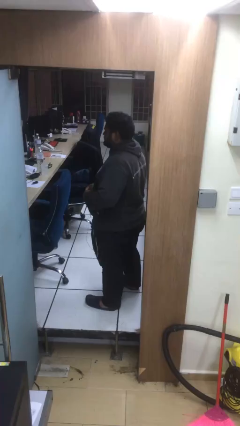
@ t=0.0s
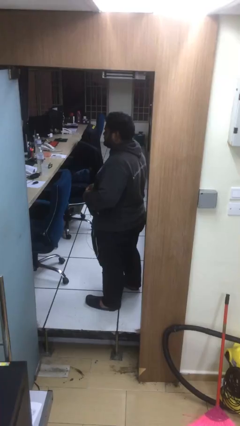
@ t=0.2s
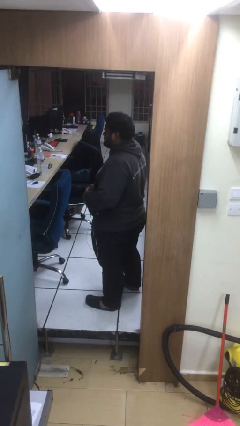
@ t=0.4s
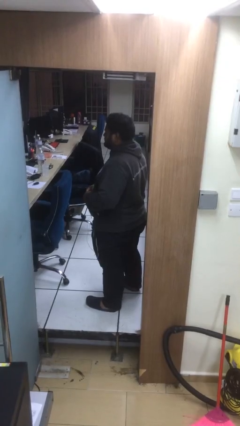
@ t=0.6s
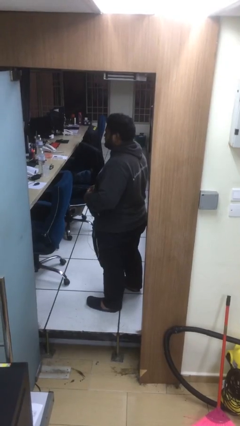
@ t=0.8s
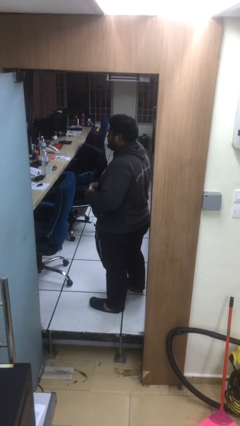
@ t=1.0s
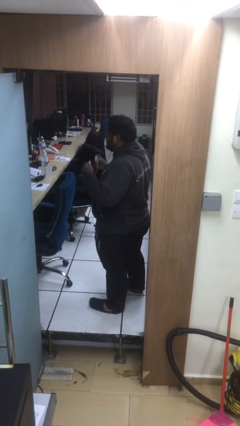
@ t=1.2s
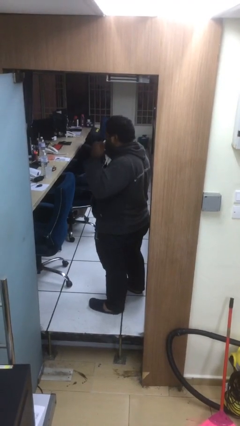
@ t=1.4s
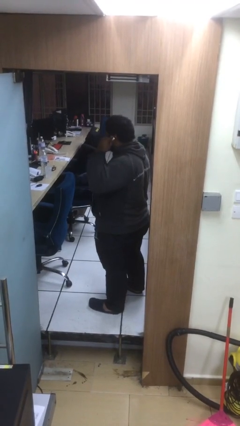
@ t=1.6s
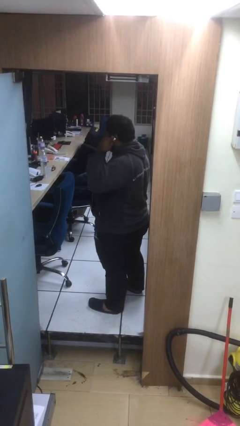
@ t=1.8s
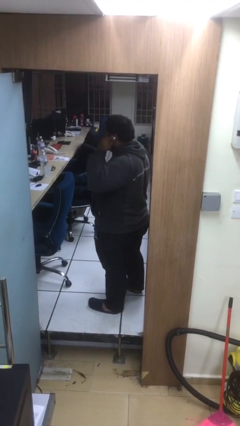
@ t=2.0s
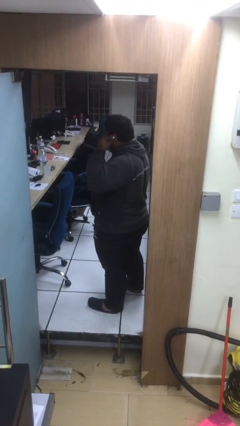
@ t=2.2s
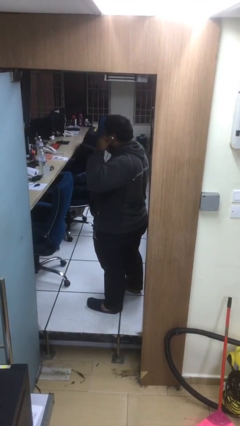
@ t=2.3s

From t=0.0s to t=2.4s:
person puts on headphones

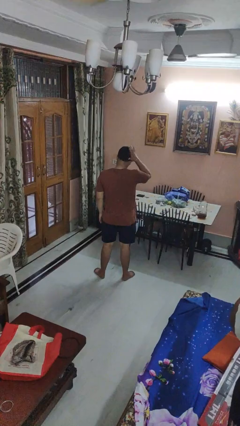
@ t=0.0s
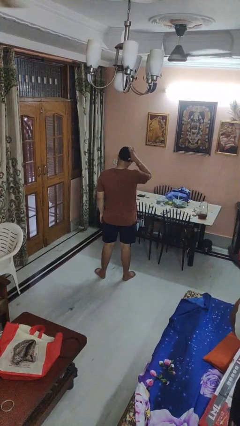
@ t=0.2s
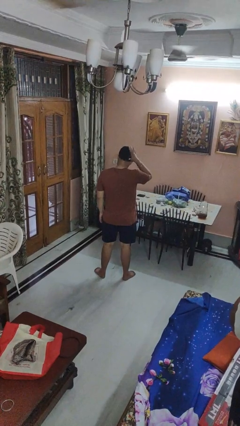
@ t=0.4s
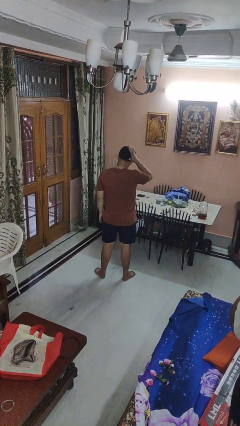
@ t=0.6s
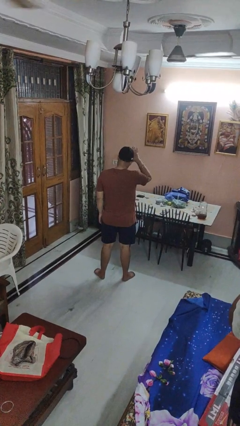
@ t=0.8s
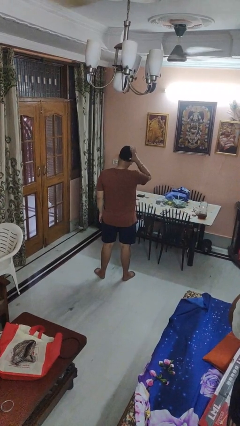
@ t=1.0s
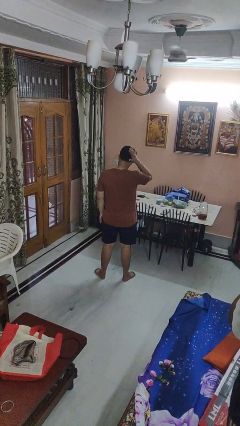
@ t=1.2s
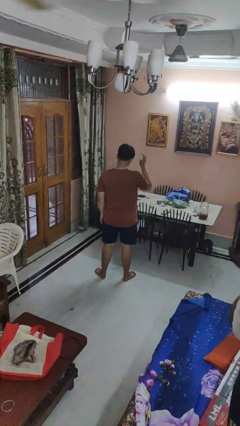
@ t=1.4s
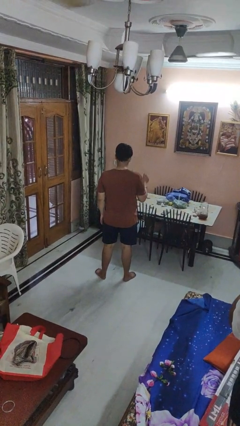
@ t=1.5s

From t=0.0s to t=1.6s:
person pats head

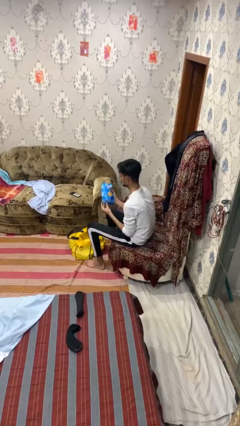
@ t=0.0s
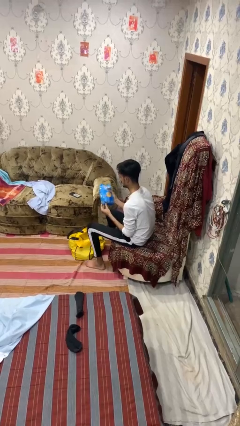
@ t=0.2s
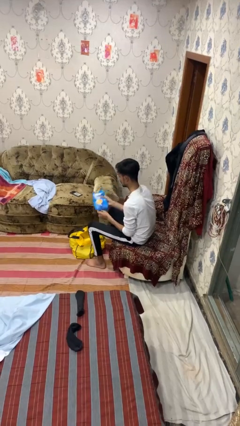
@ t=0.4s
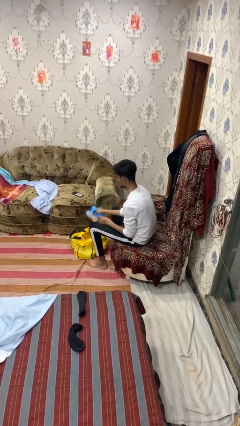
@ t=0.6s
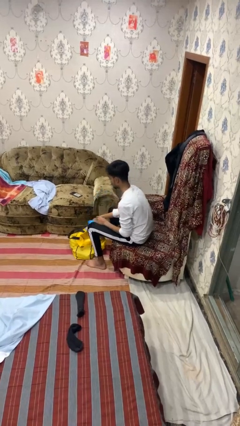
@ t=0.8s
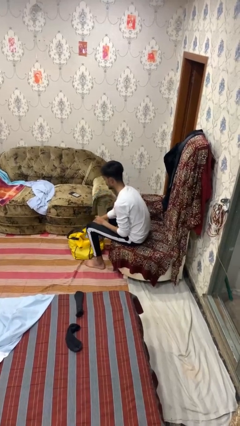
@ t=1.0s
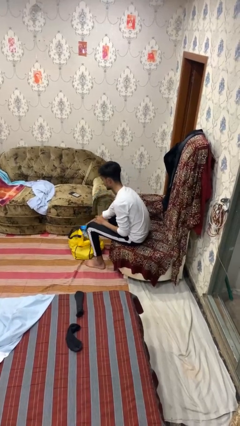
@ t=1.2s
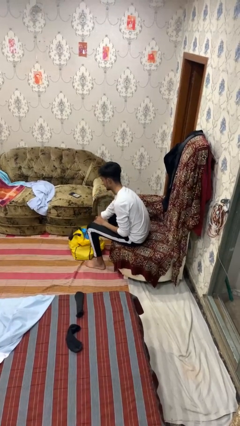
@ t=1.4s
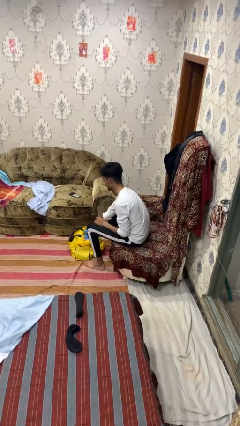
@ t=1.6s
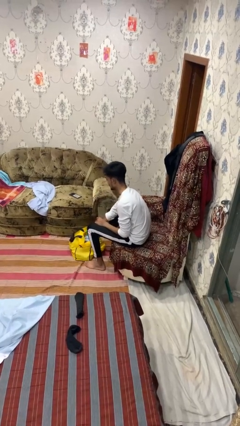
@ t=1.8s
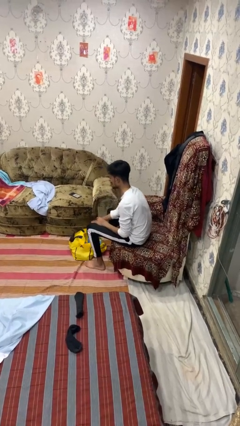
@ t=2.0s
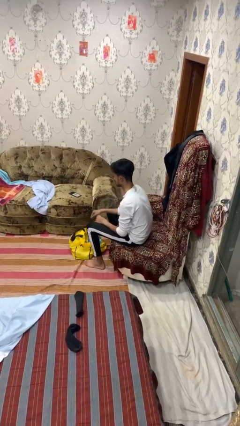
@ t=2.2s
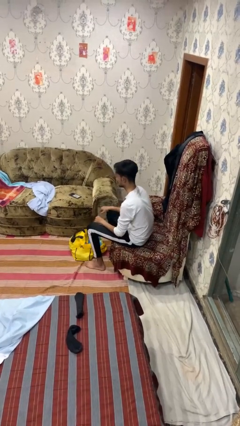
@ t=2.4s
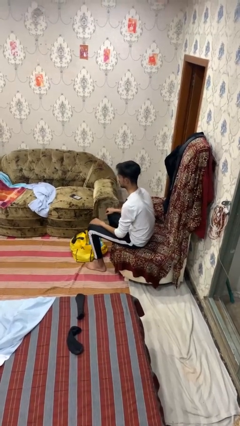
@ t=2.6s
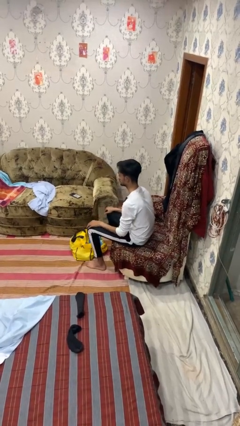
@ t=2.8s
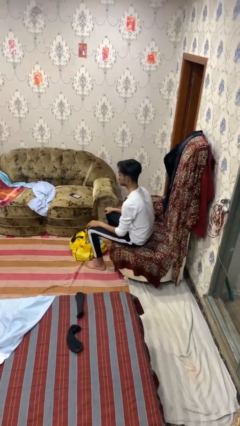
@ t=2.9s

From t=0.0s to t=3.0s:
person puts object into bag

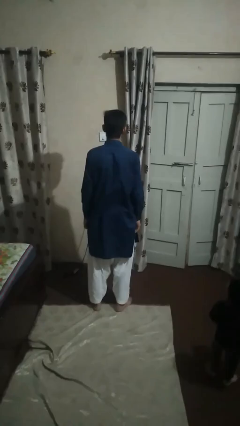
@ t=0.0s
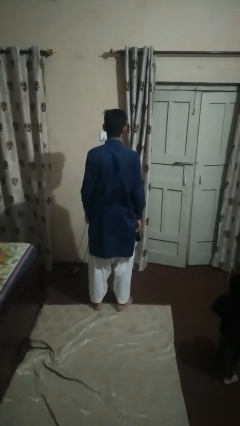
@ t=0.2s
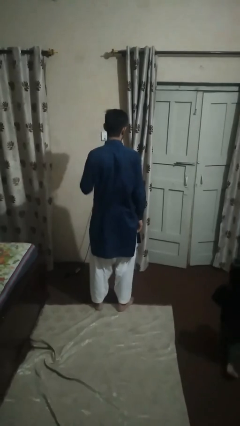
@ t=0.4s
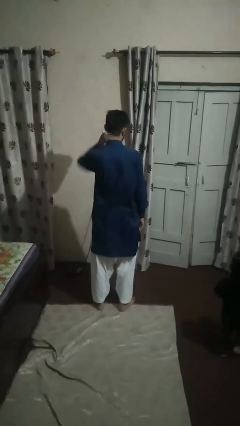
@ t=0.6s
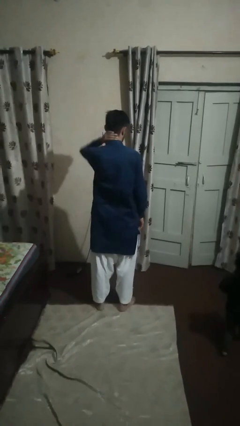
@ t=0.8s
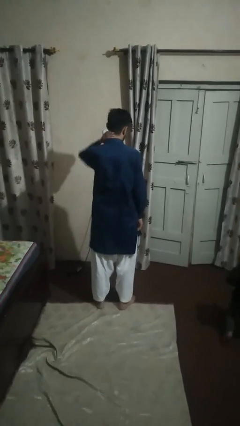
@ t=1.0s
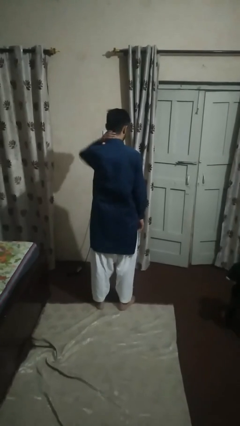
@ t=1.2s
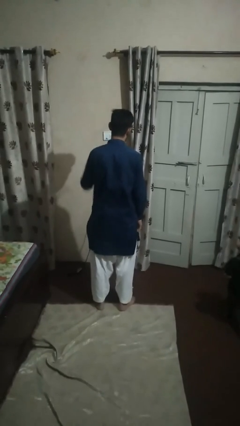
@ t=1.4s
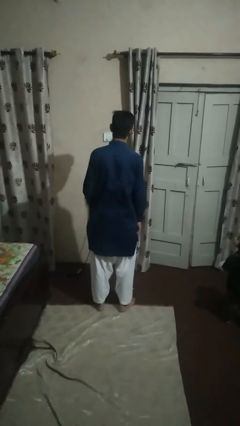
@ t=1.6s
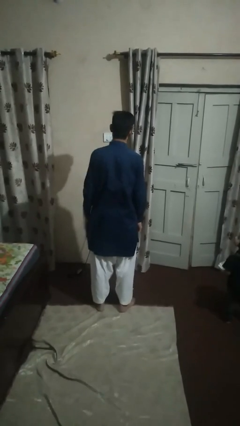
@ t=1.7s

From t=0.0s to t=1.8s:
person rubs neck

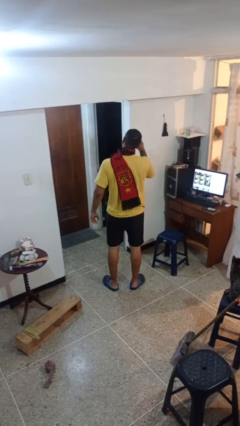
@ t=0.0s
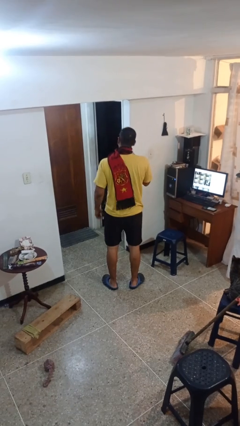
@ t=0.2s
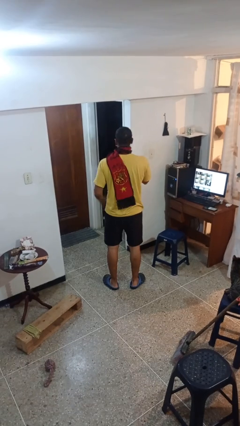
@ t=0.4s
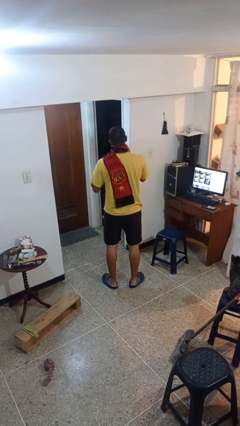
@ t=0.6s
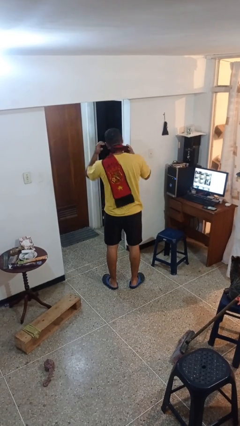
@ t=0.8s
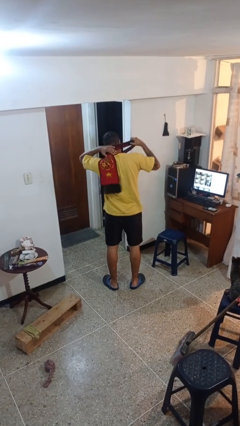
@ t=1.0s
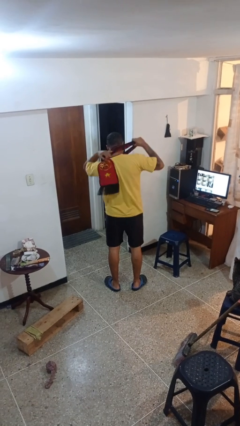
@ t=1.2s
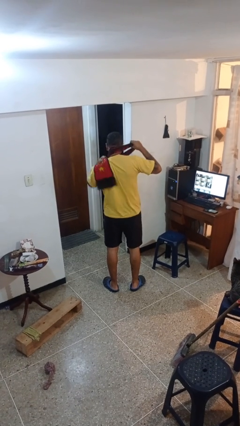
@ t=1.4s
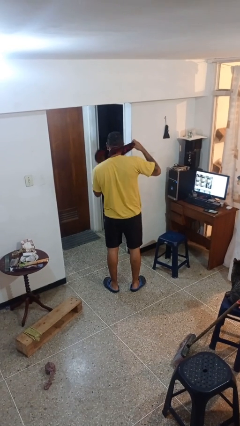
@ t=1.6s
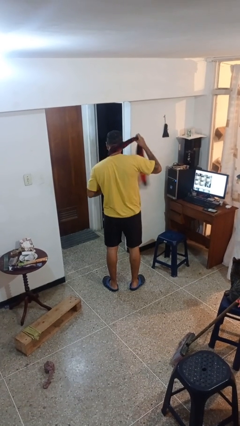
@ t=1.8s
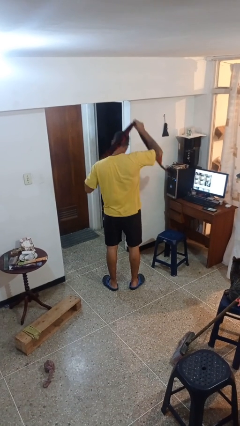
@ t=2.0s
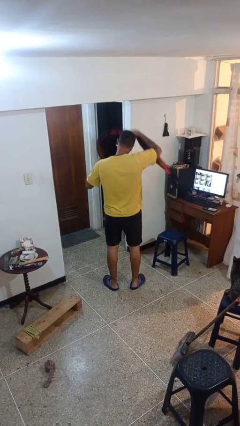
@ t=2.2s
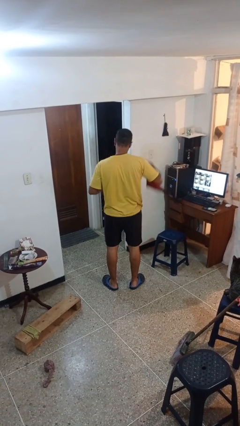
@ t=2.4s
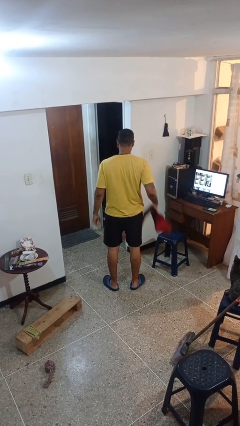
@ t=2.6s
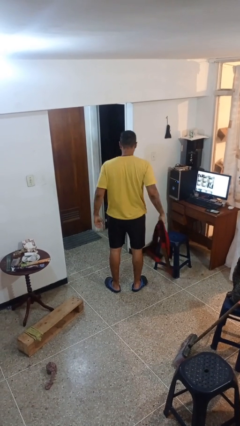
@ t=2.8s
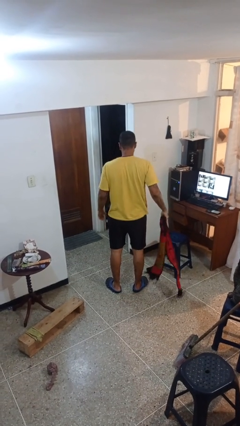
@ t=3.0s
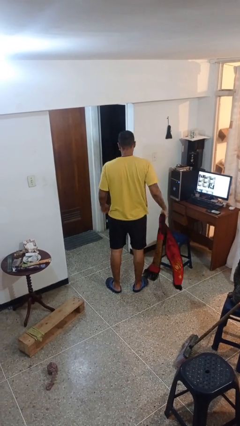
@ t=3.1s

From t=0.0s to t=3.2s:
person takes off scarf

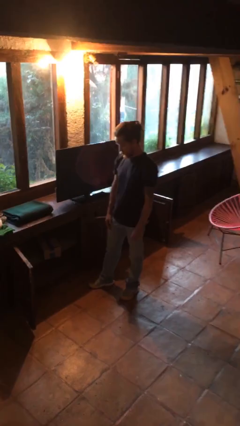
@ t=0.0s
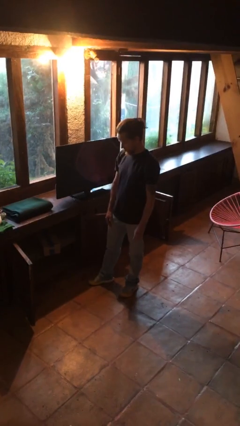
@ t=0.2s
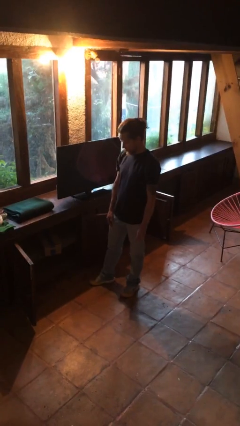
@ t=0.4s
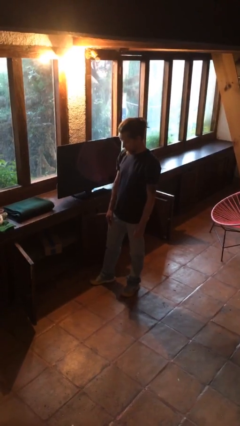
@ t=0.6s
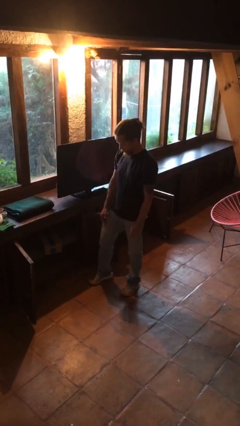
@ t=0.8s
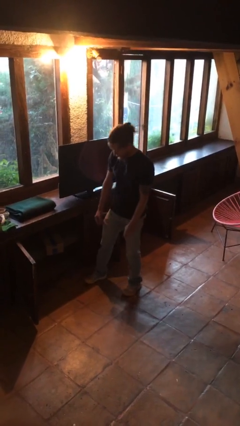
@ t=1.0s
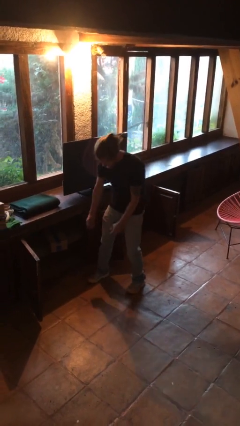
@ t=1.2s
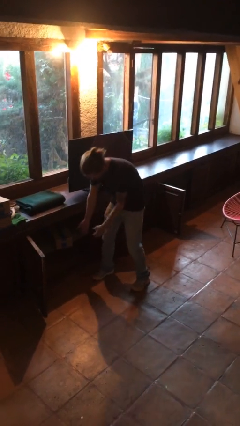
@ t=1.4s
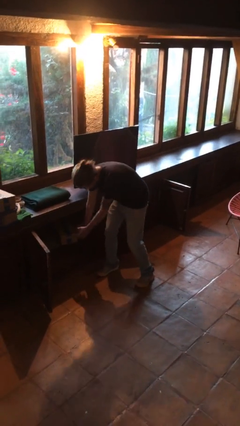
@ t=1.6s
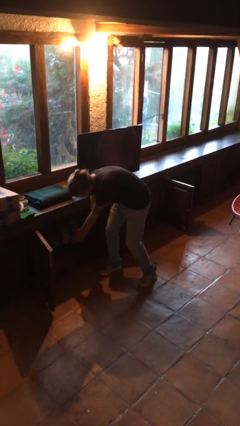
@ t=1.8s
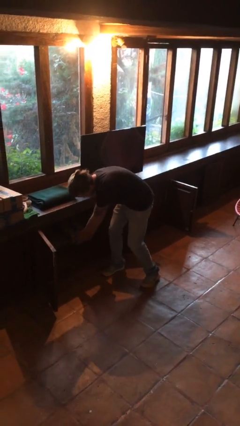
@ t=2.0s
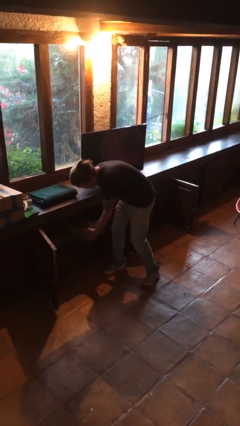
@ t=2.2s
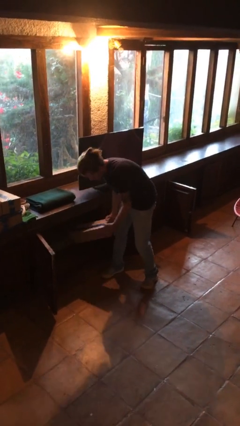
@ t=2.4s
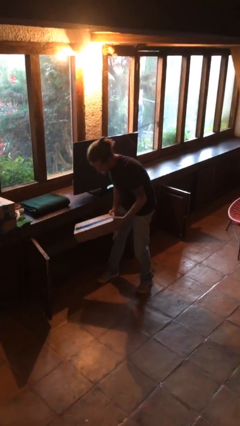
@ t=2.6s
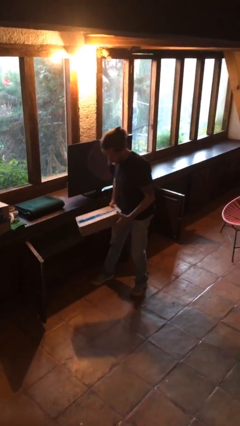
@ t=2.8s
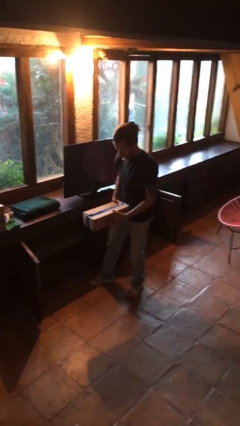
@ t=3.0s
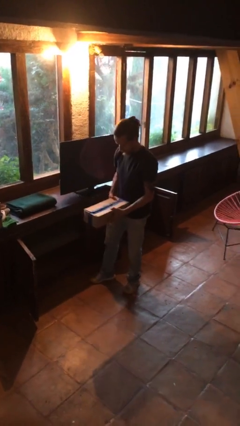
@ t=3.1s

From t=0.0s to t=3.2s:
person picks up object from cabinet

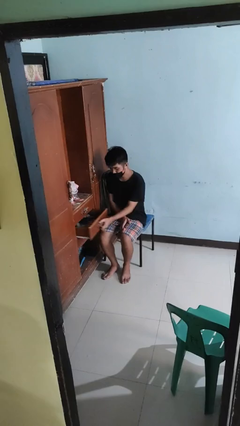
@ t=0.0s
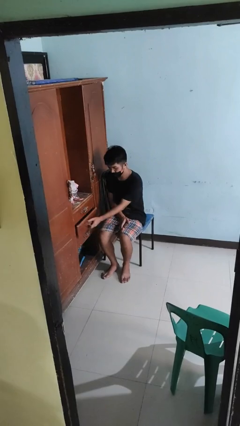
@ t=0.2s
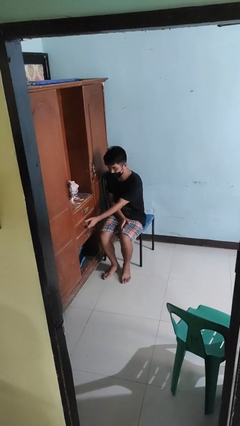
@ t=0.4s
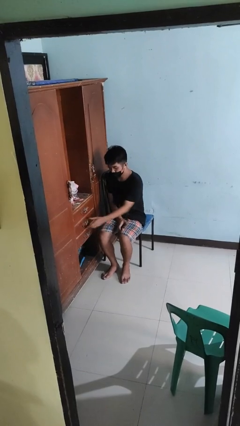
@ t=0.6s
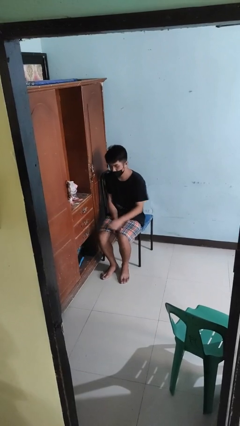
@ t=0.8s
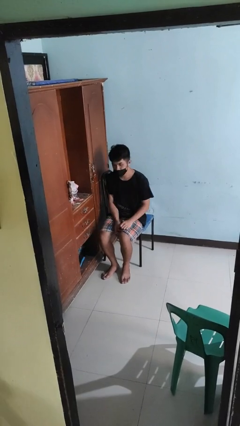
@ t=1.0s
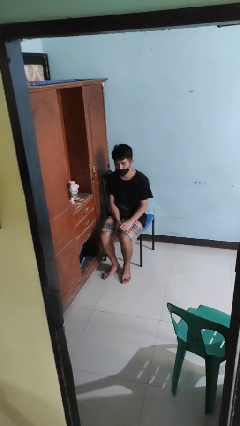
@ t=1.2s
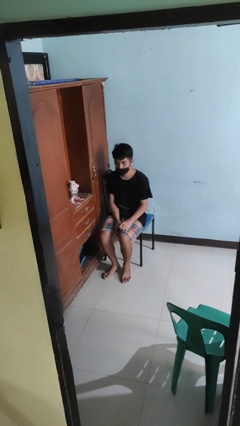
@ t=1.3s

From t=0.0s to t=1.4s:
person closes dresser drawer

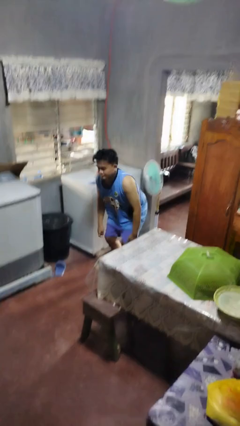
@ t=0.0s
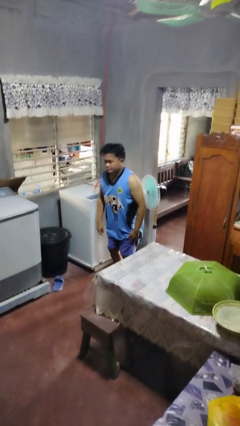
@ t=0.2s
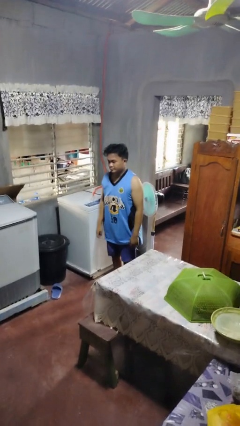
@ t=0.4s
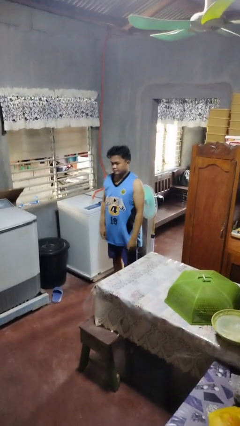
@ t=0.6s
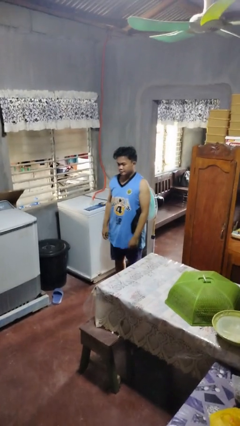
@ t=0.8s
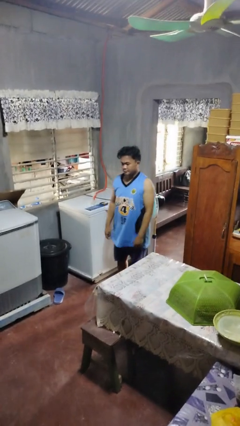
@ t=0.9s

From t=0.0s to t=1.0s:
person stands up from floor
